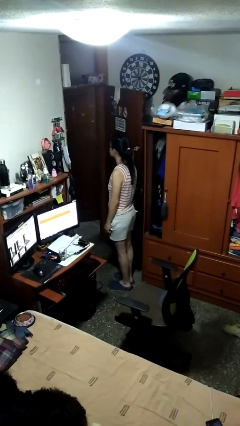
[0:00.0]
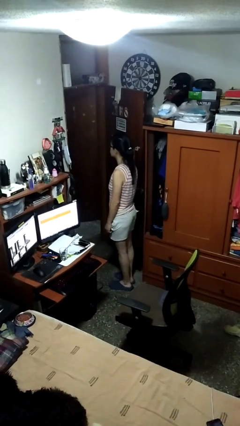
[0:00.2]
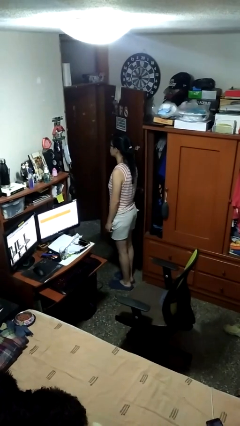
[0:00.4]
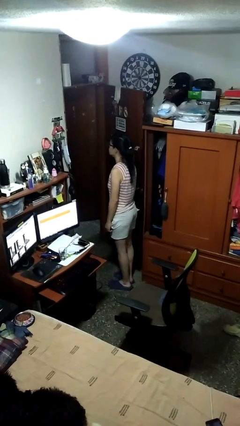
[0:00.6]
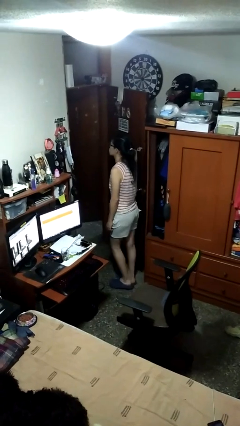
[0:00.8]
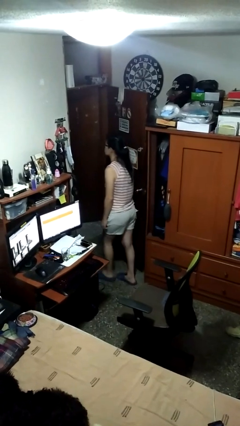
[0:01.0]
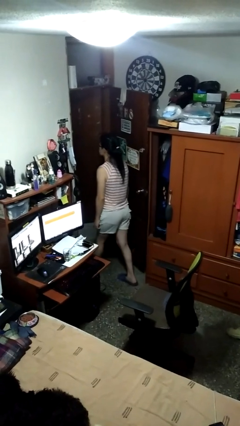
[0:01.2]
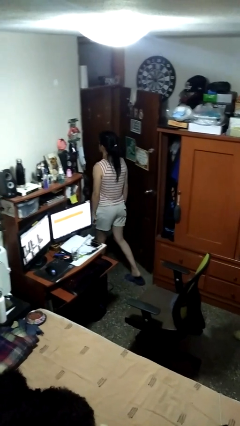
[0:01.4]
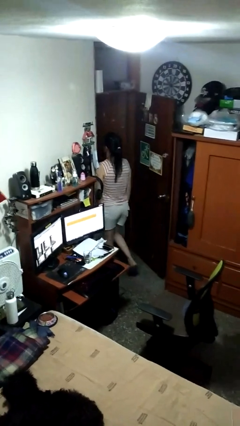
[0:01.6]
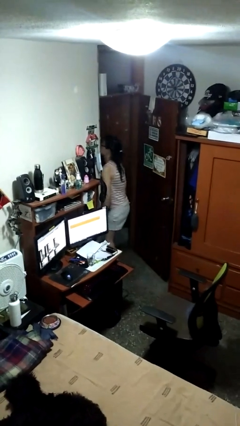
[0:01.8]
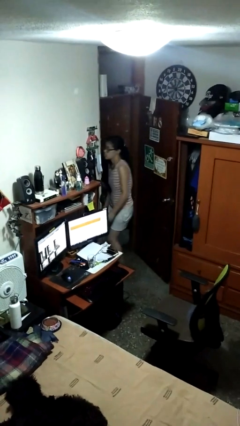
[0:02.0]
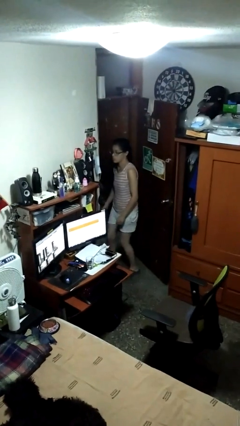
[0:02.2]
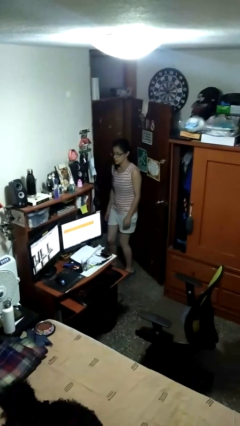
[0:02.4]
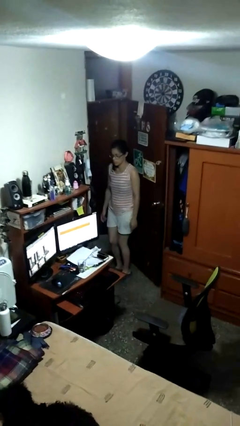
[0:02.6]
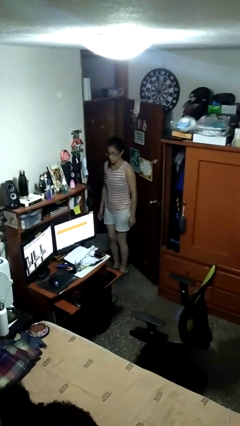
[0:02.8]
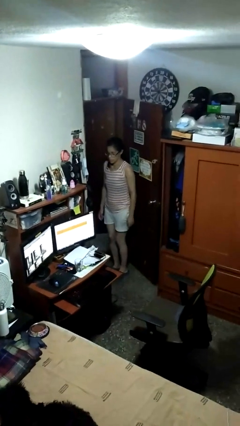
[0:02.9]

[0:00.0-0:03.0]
person bumps into wall

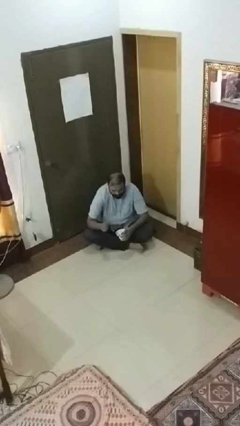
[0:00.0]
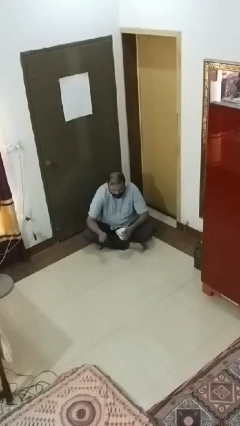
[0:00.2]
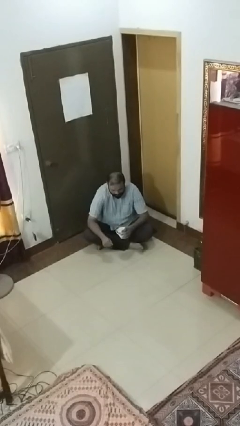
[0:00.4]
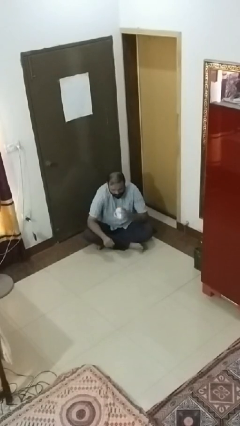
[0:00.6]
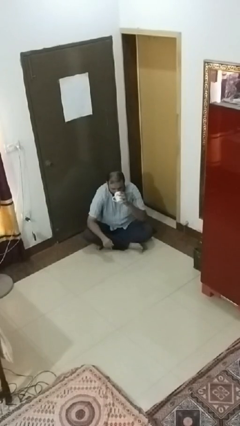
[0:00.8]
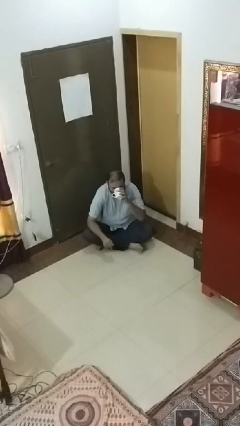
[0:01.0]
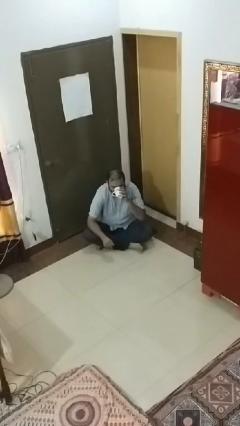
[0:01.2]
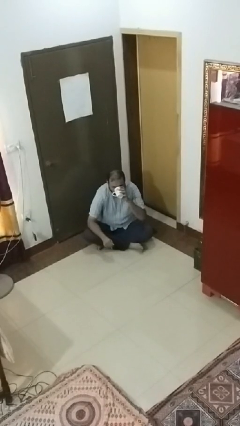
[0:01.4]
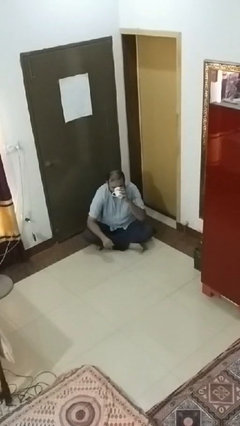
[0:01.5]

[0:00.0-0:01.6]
person drinks from mug

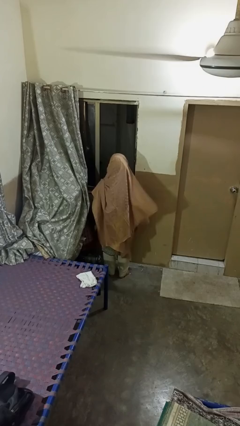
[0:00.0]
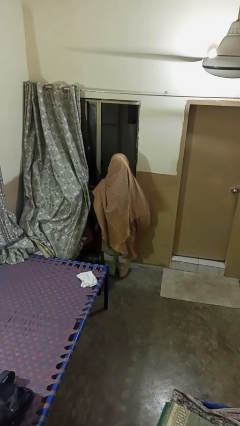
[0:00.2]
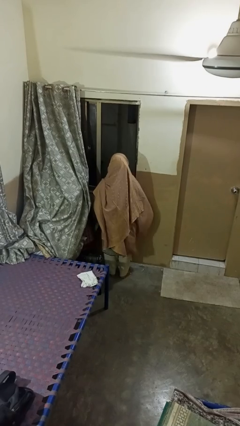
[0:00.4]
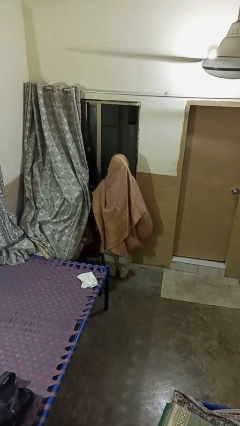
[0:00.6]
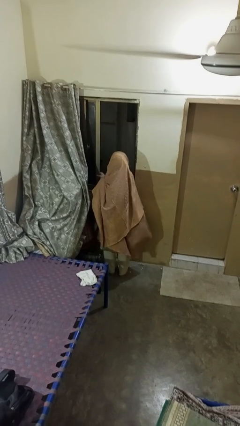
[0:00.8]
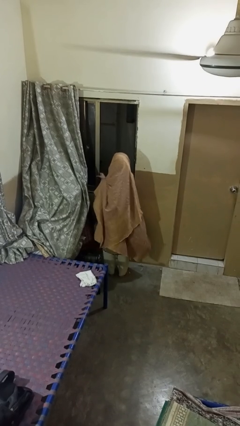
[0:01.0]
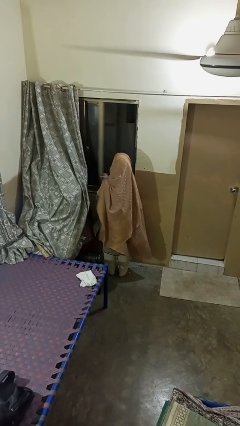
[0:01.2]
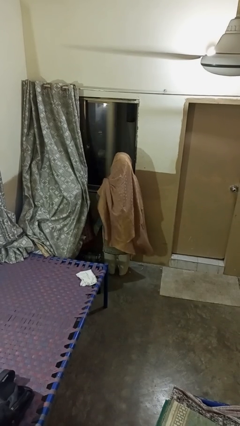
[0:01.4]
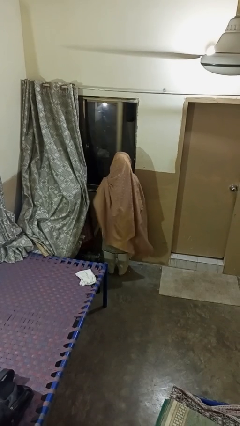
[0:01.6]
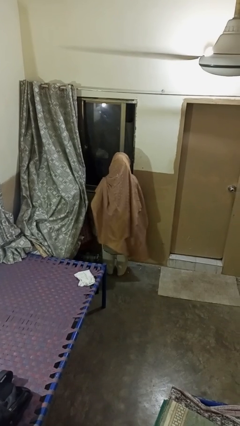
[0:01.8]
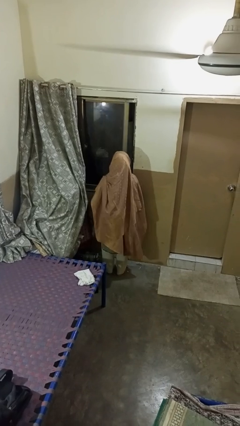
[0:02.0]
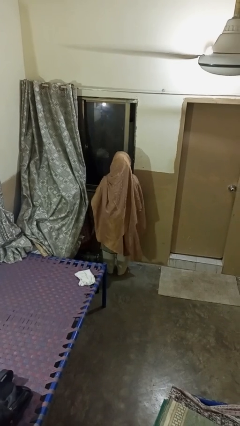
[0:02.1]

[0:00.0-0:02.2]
person closes home window

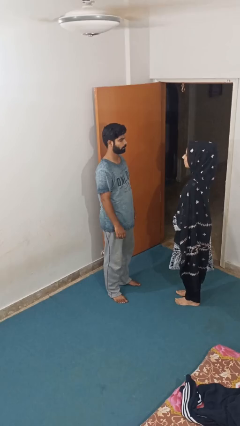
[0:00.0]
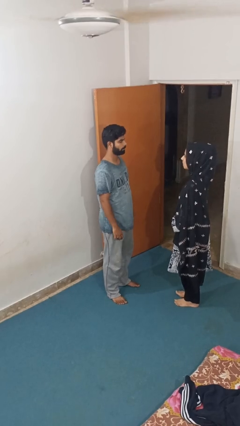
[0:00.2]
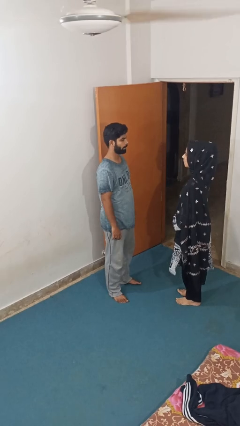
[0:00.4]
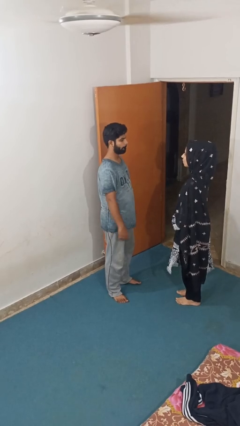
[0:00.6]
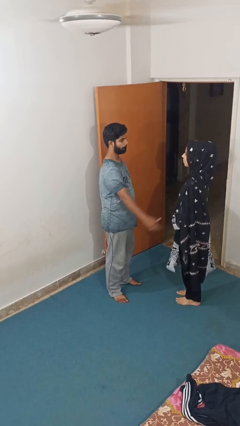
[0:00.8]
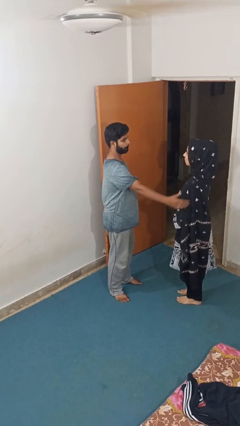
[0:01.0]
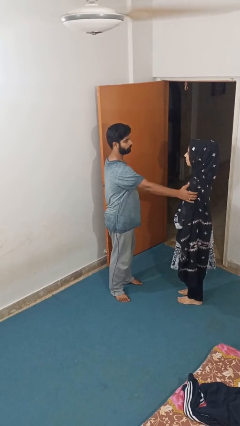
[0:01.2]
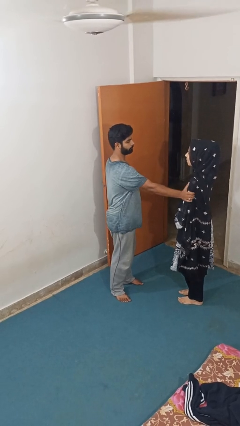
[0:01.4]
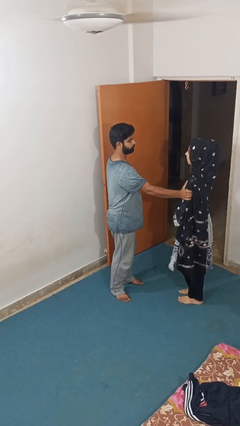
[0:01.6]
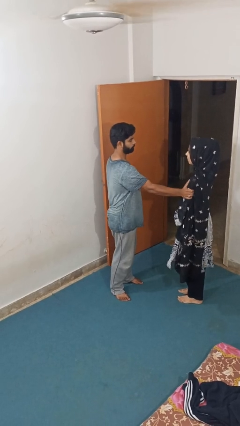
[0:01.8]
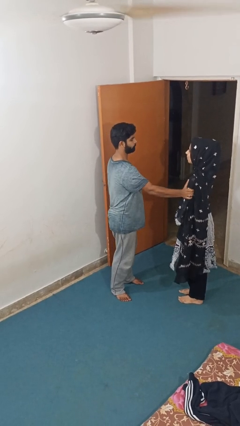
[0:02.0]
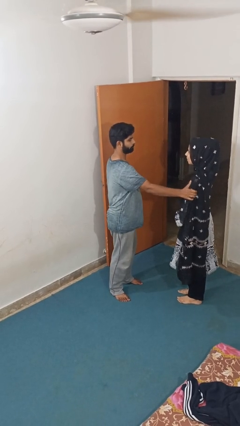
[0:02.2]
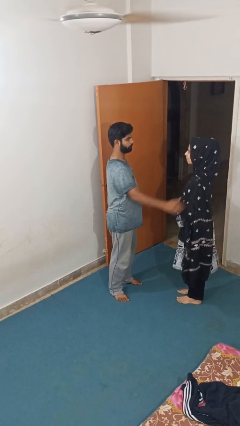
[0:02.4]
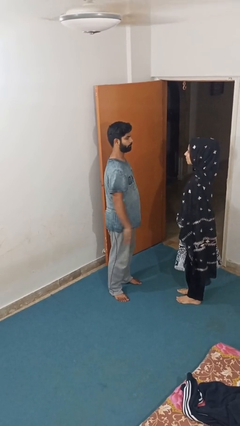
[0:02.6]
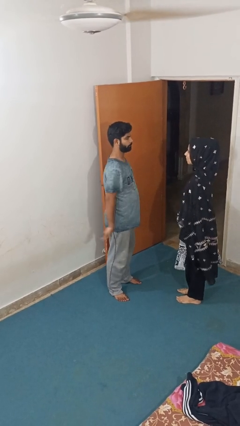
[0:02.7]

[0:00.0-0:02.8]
person grabs person by bicep

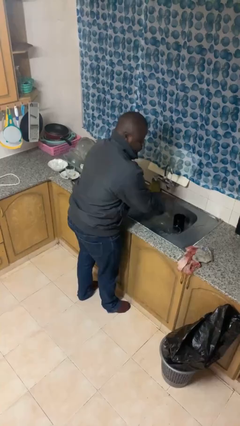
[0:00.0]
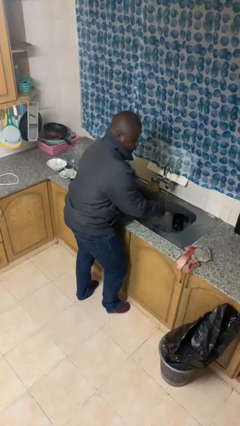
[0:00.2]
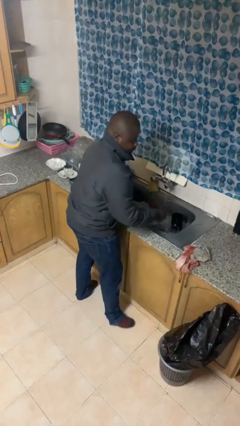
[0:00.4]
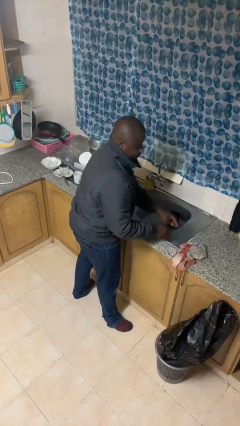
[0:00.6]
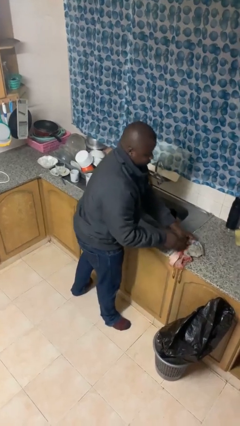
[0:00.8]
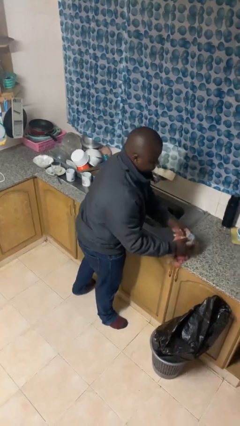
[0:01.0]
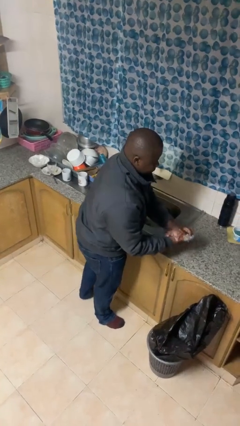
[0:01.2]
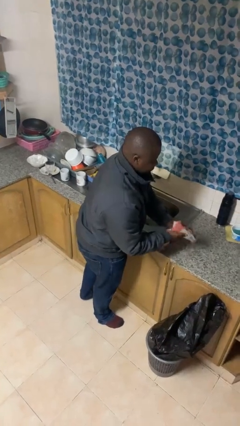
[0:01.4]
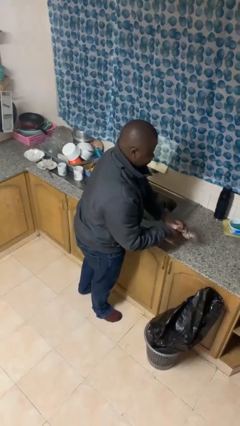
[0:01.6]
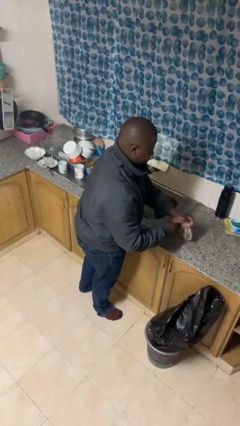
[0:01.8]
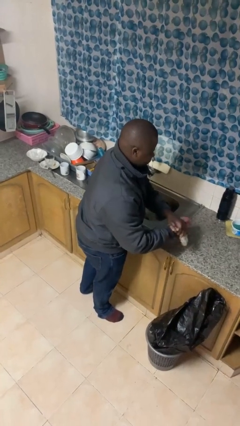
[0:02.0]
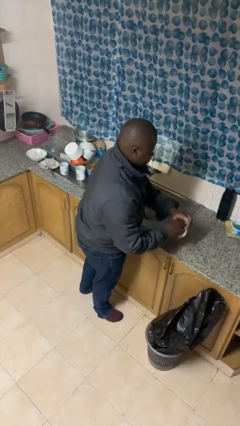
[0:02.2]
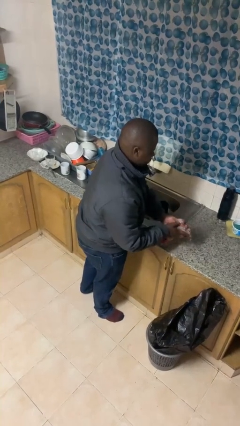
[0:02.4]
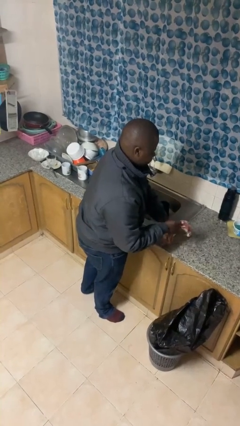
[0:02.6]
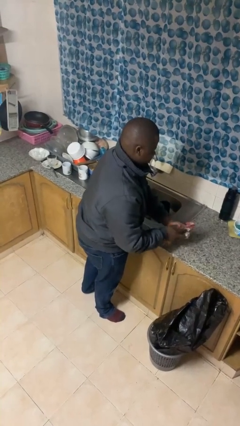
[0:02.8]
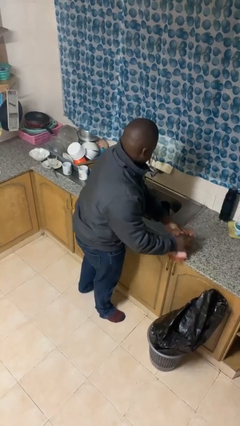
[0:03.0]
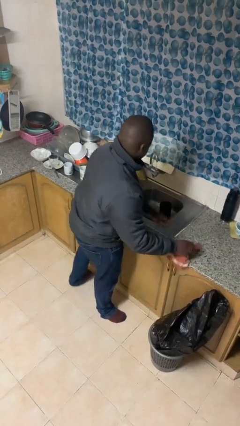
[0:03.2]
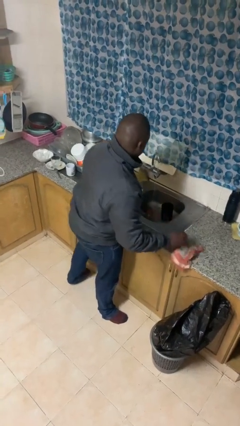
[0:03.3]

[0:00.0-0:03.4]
person dries hands with towel

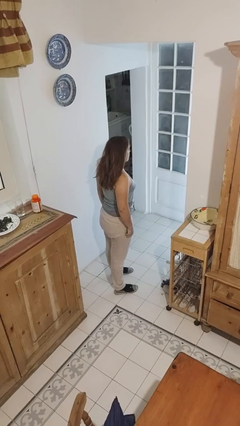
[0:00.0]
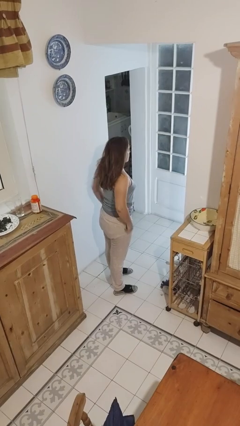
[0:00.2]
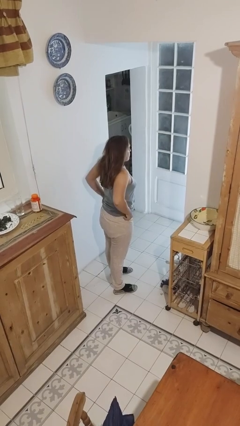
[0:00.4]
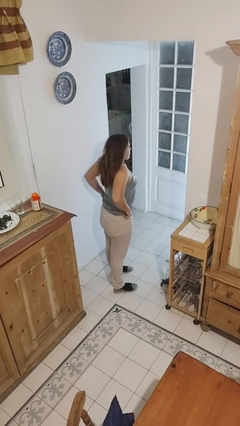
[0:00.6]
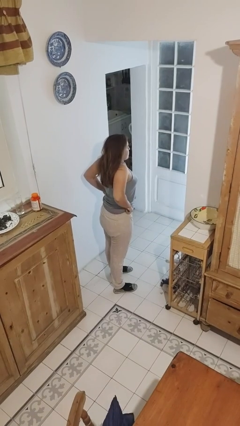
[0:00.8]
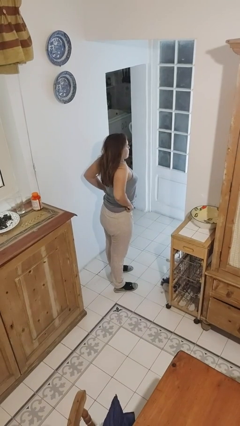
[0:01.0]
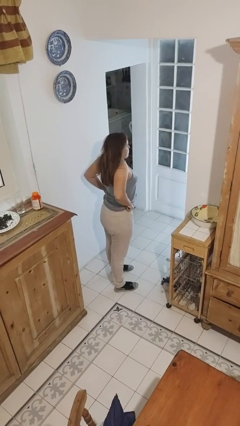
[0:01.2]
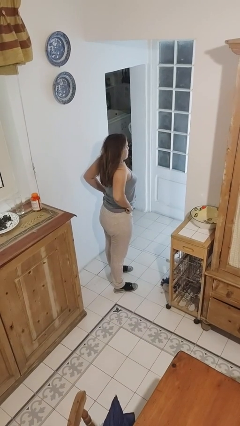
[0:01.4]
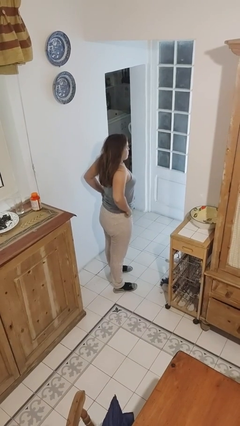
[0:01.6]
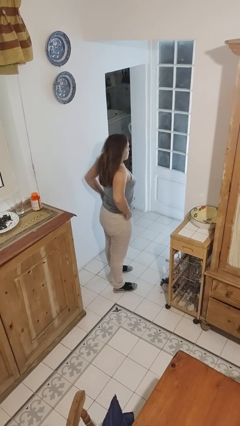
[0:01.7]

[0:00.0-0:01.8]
person hikes up pants

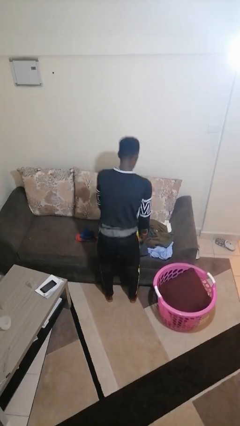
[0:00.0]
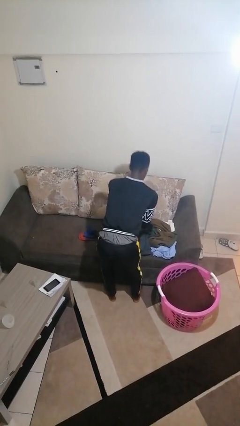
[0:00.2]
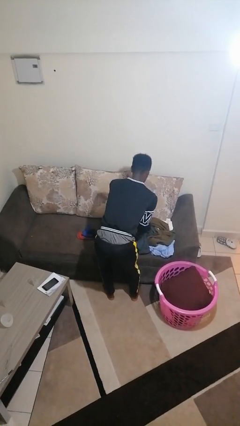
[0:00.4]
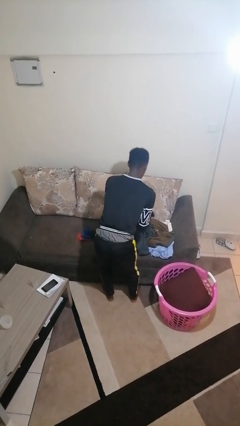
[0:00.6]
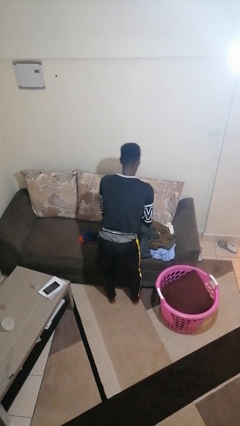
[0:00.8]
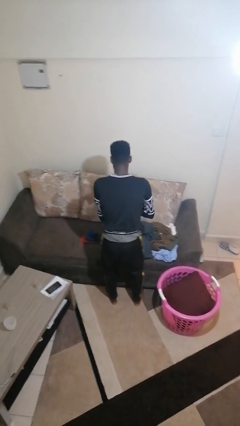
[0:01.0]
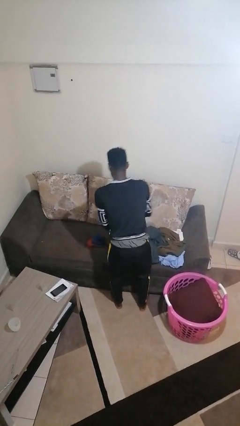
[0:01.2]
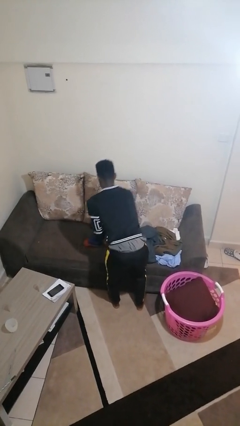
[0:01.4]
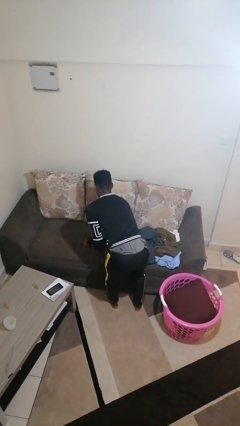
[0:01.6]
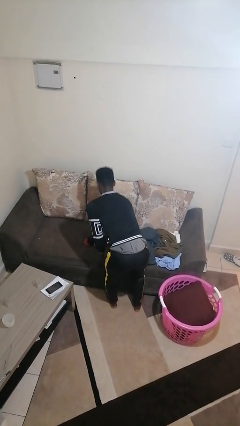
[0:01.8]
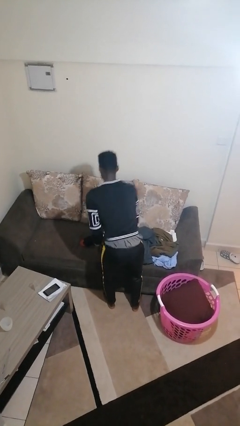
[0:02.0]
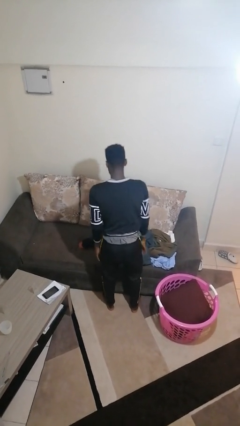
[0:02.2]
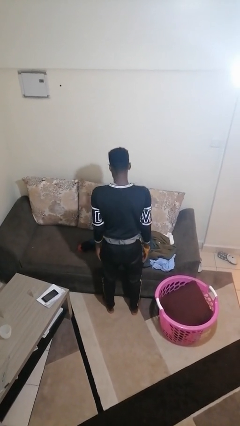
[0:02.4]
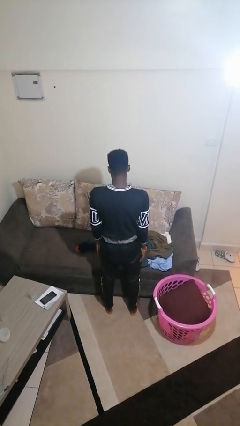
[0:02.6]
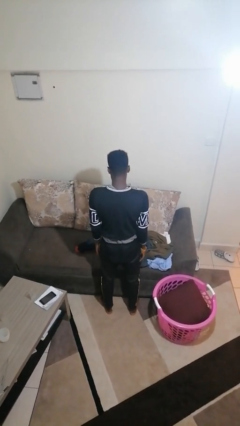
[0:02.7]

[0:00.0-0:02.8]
person folds socks
